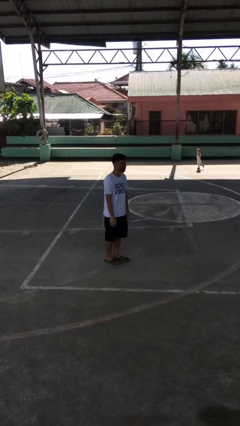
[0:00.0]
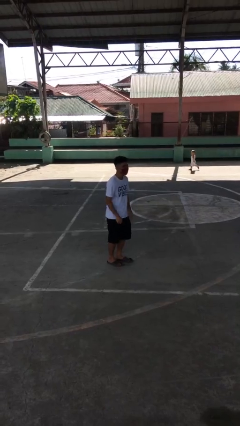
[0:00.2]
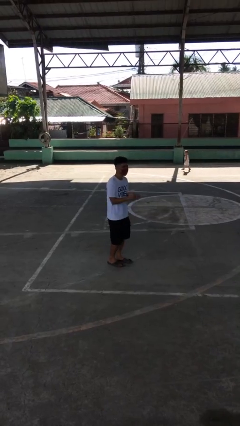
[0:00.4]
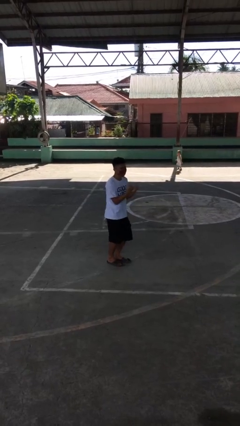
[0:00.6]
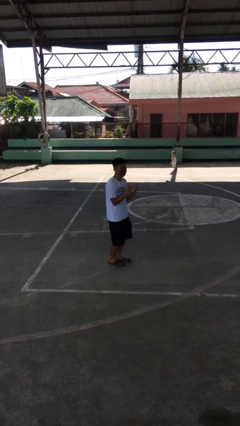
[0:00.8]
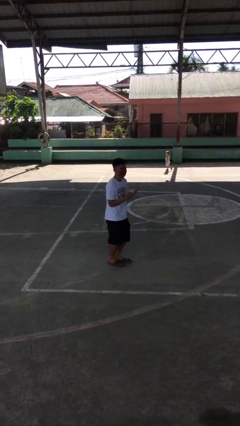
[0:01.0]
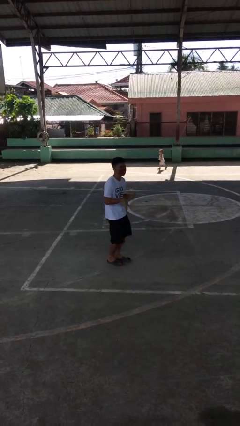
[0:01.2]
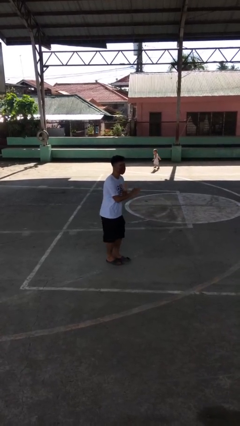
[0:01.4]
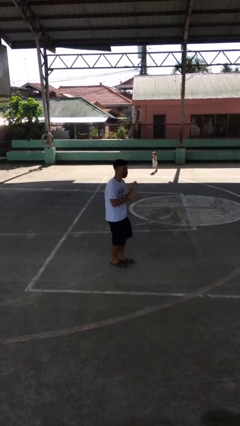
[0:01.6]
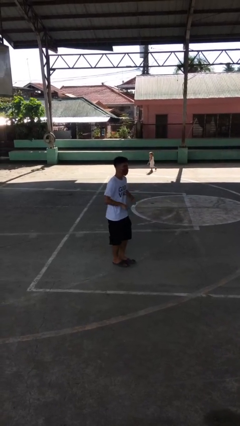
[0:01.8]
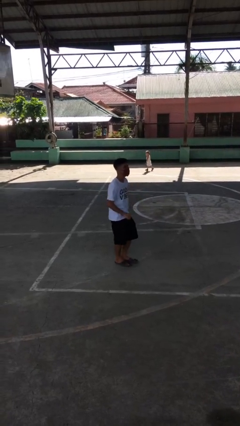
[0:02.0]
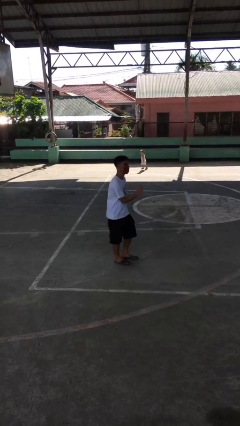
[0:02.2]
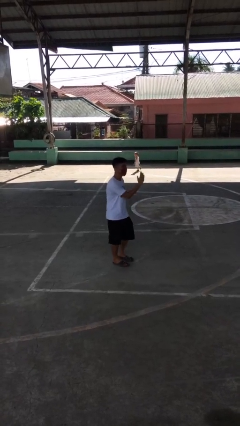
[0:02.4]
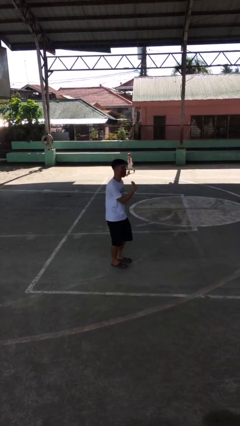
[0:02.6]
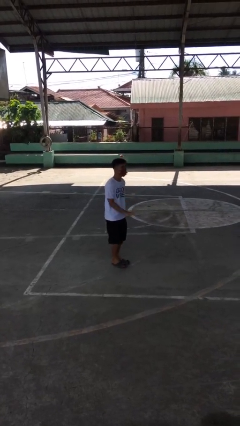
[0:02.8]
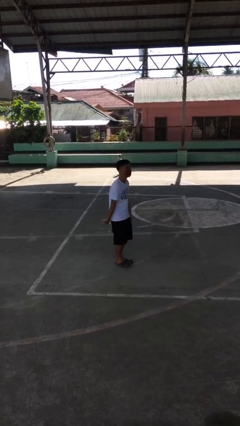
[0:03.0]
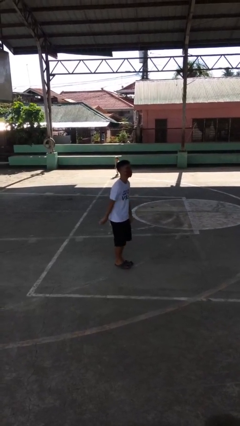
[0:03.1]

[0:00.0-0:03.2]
person dances in place

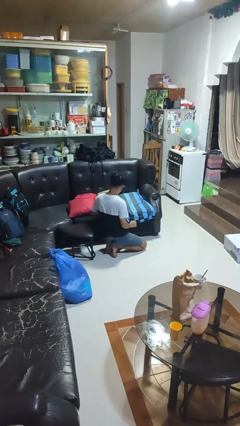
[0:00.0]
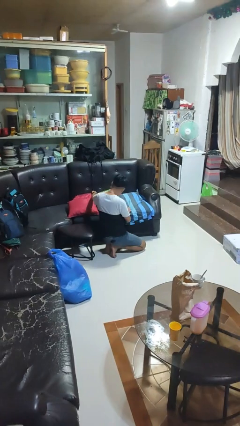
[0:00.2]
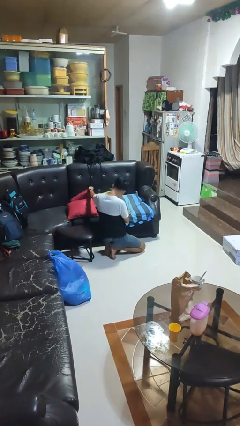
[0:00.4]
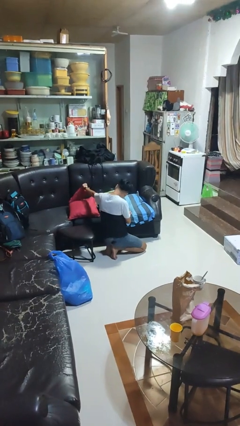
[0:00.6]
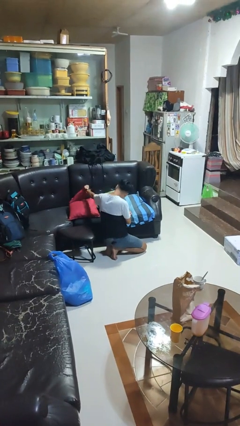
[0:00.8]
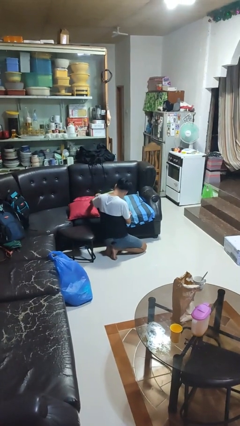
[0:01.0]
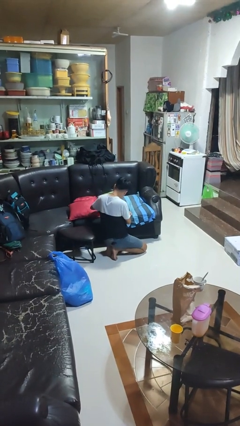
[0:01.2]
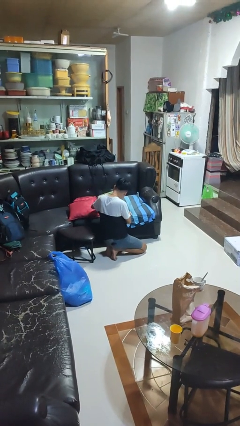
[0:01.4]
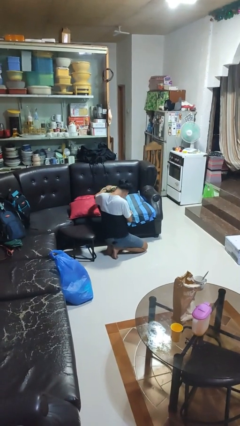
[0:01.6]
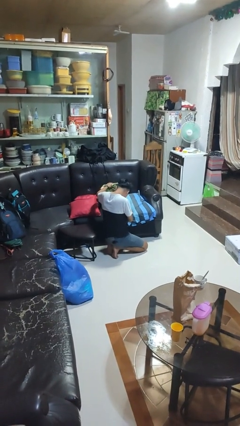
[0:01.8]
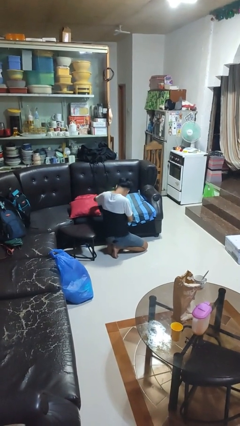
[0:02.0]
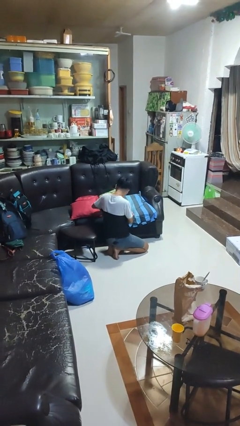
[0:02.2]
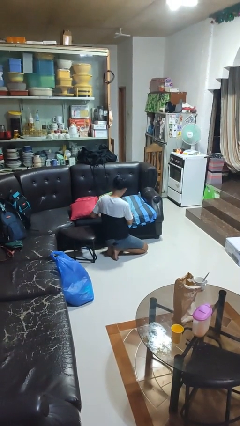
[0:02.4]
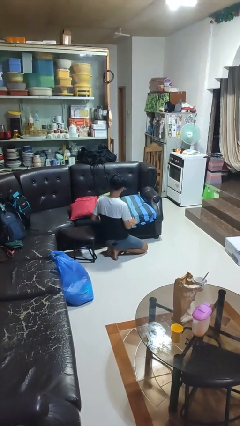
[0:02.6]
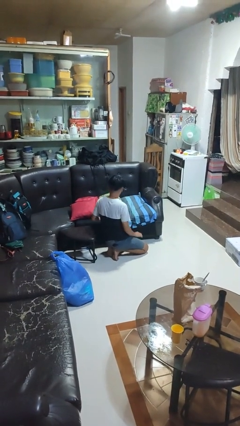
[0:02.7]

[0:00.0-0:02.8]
person searches in couch

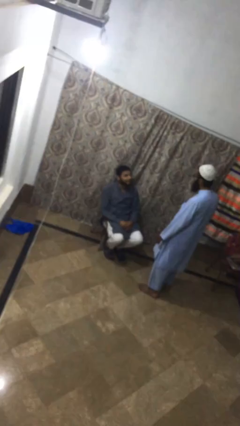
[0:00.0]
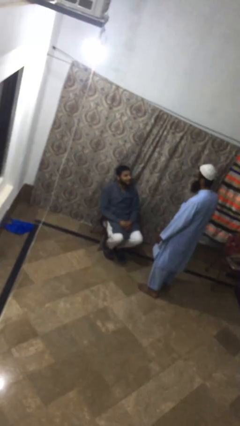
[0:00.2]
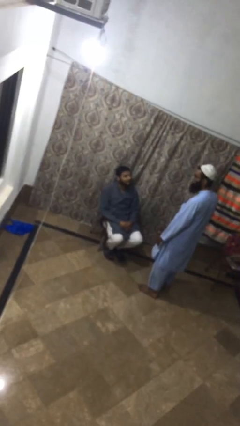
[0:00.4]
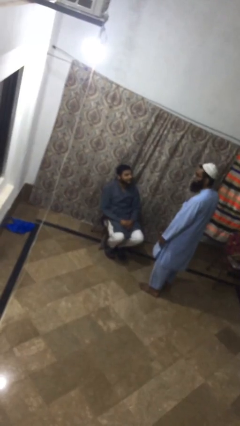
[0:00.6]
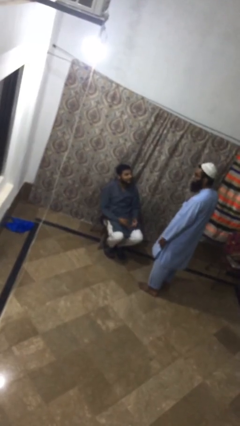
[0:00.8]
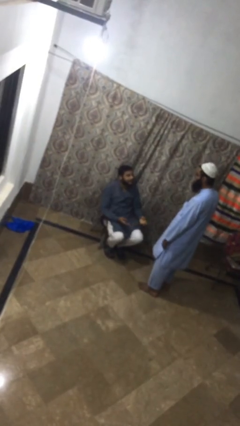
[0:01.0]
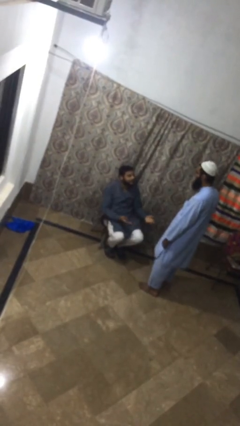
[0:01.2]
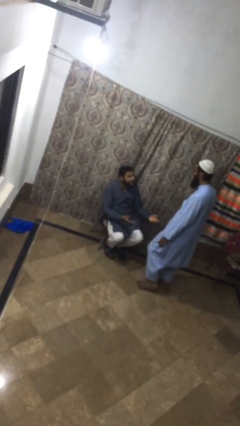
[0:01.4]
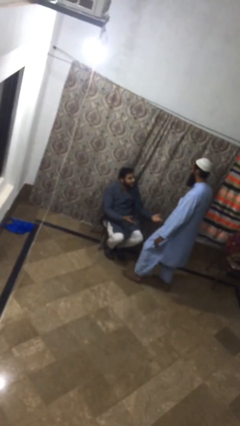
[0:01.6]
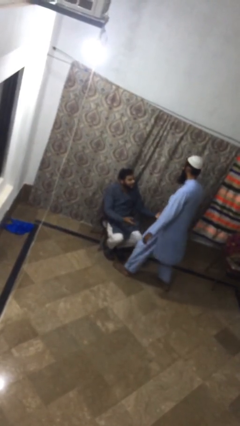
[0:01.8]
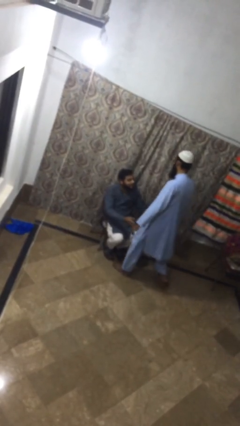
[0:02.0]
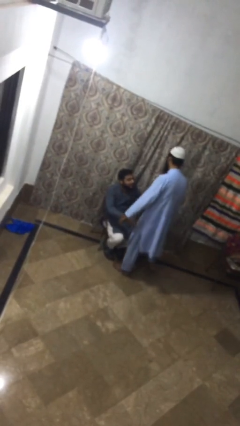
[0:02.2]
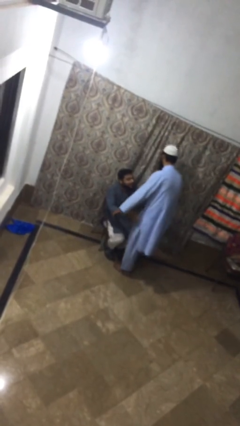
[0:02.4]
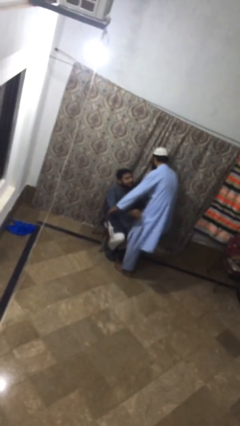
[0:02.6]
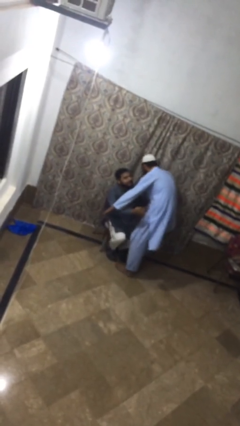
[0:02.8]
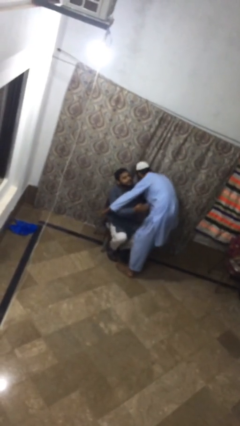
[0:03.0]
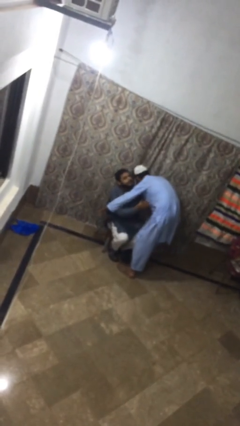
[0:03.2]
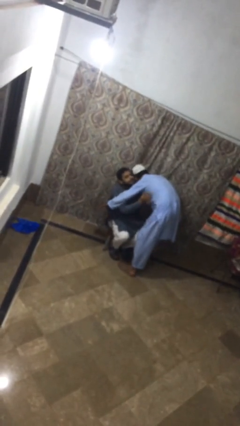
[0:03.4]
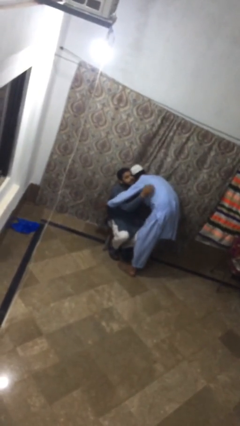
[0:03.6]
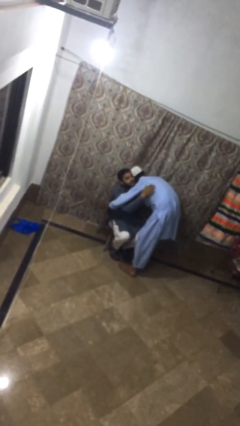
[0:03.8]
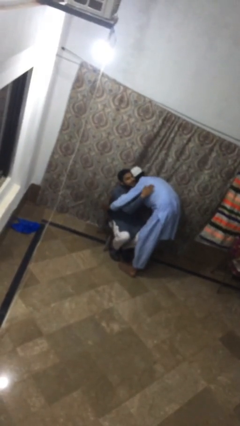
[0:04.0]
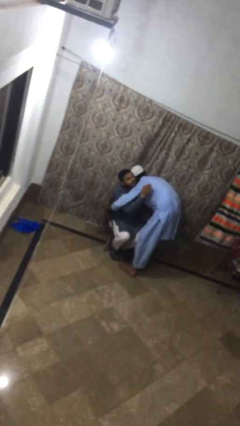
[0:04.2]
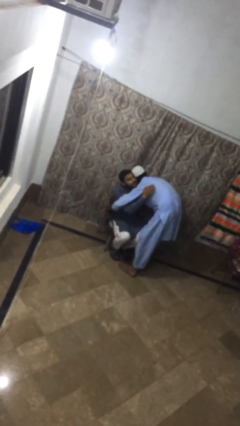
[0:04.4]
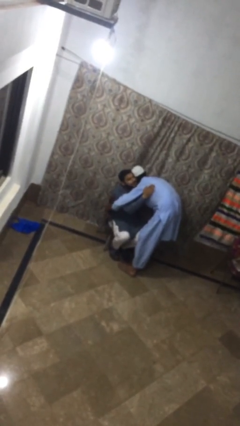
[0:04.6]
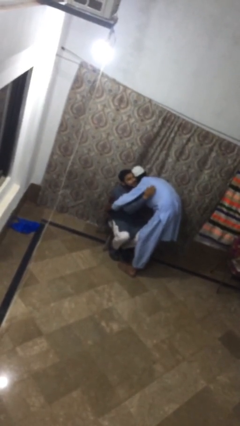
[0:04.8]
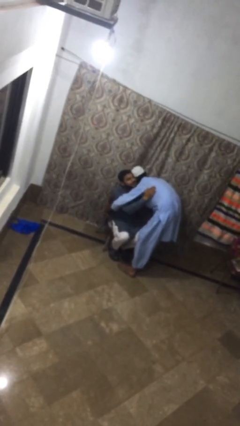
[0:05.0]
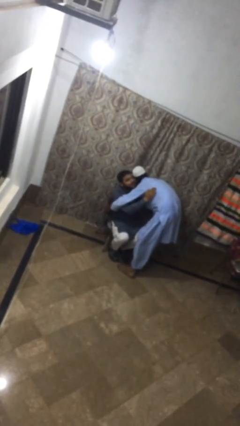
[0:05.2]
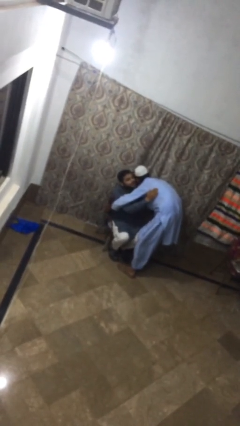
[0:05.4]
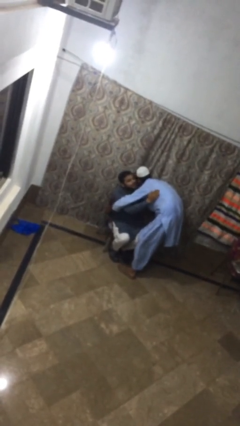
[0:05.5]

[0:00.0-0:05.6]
person embraces person

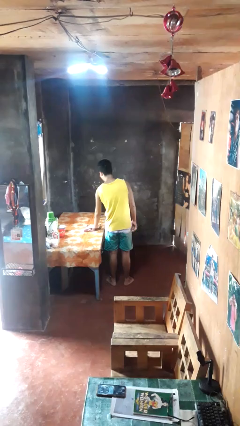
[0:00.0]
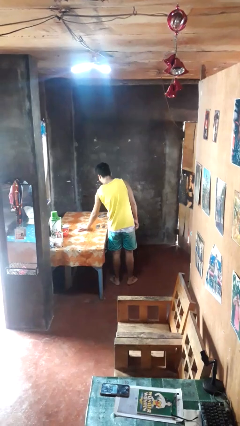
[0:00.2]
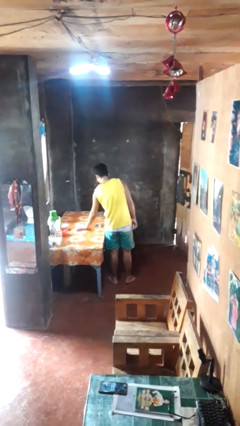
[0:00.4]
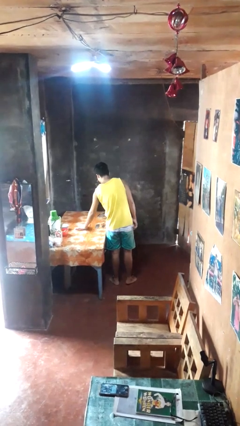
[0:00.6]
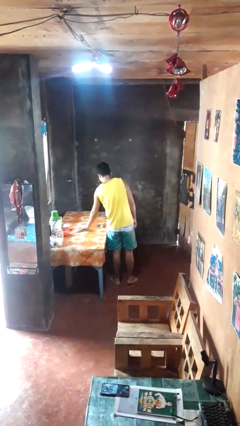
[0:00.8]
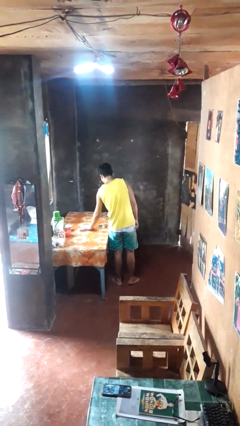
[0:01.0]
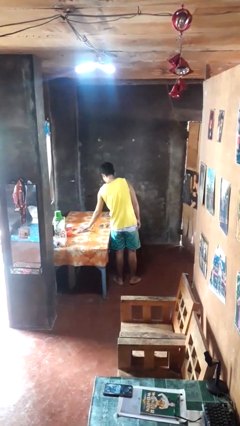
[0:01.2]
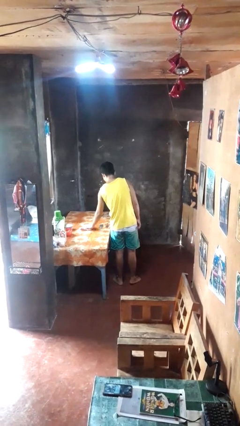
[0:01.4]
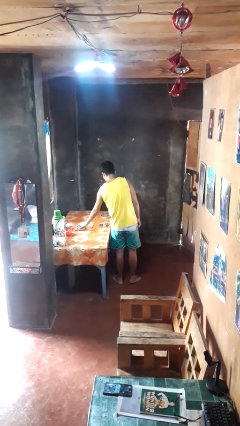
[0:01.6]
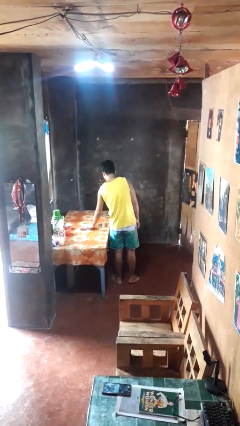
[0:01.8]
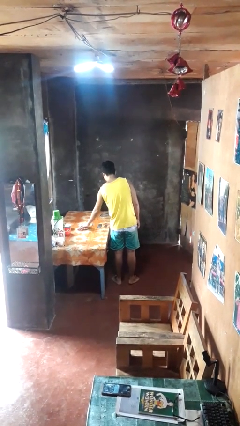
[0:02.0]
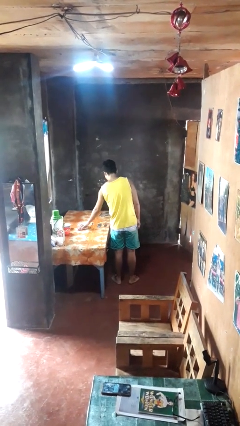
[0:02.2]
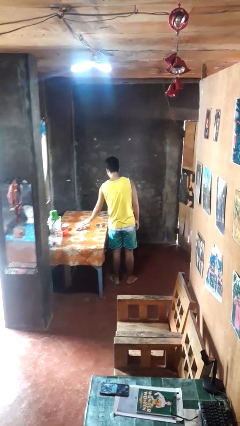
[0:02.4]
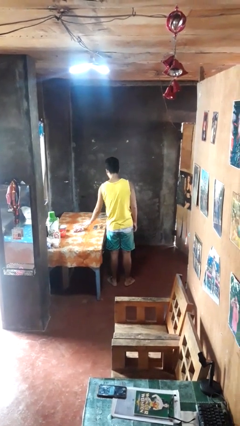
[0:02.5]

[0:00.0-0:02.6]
person cleans table with rag

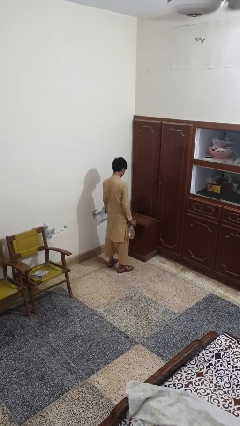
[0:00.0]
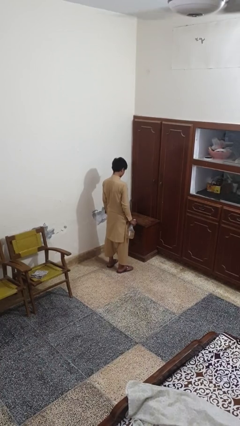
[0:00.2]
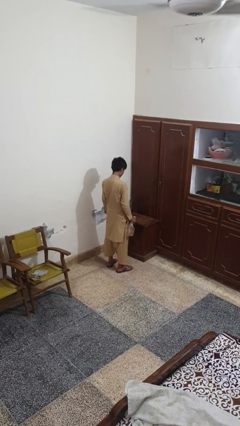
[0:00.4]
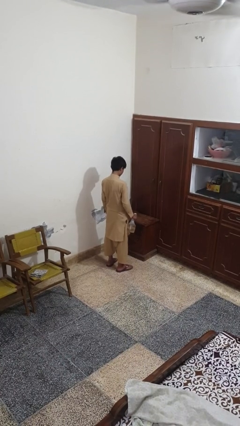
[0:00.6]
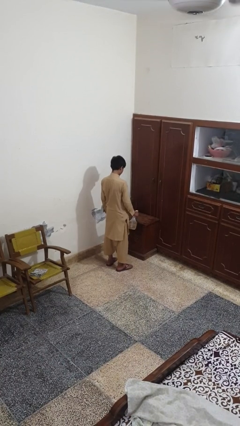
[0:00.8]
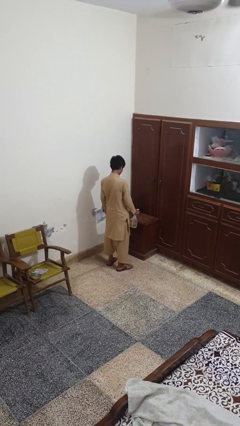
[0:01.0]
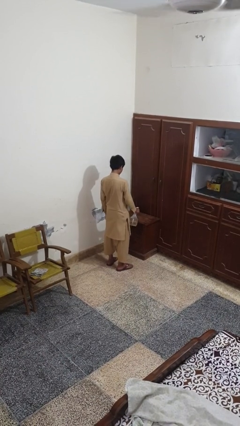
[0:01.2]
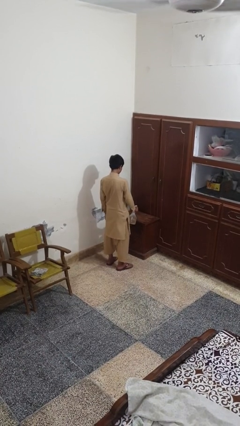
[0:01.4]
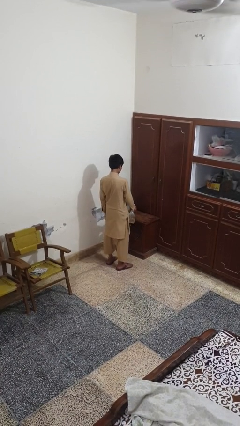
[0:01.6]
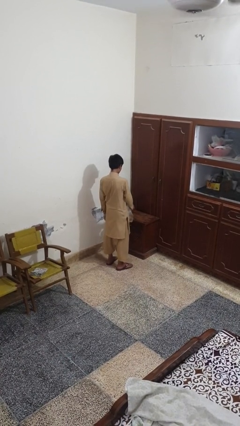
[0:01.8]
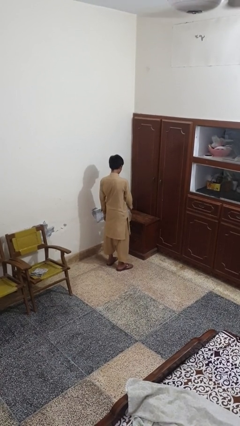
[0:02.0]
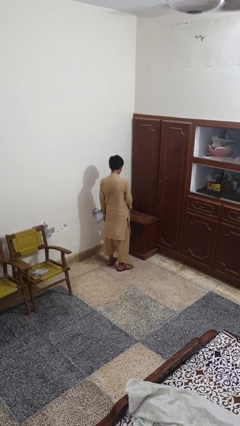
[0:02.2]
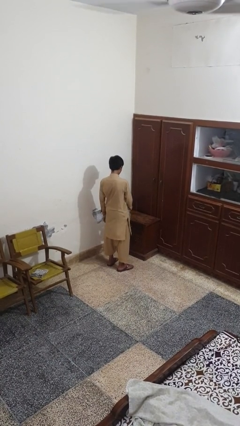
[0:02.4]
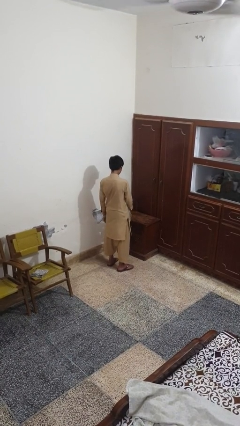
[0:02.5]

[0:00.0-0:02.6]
person sprays from bottle

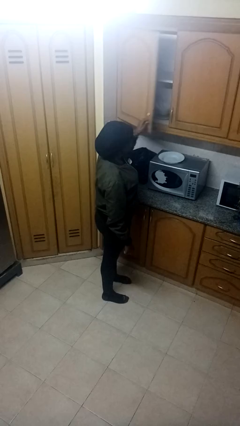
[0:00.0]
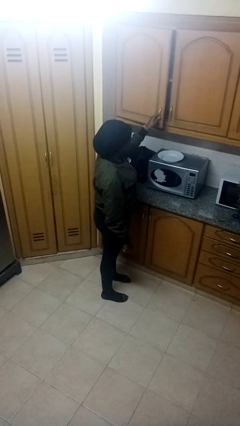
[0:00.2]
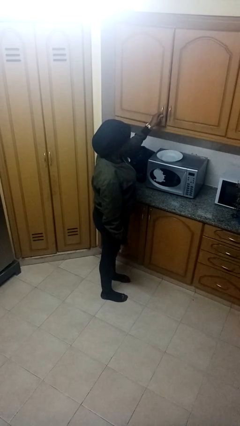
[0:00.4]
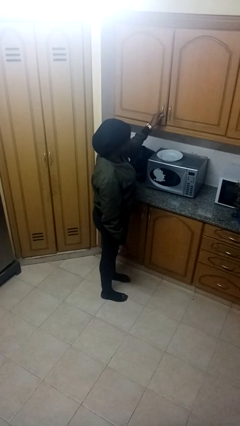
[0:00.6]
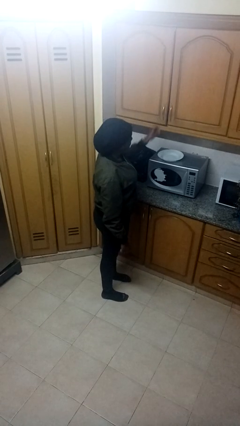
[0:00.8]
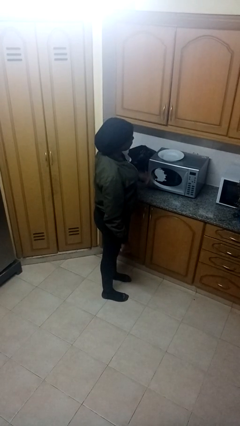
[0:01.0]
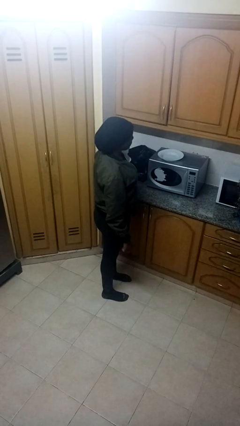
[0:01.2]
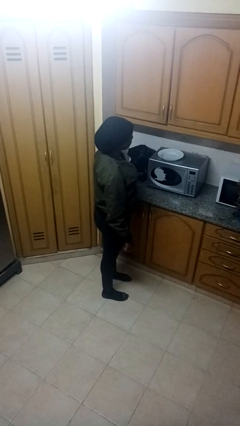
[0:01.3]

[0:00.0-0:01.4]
person closes cabinet
